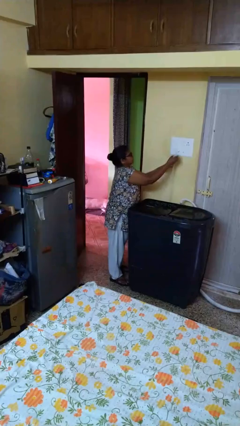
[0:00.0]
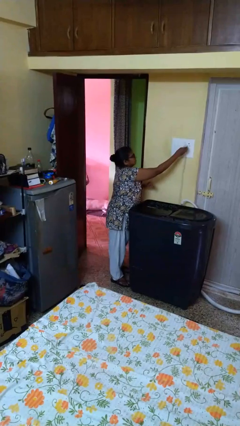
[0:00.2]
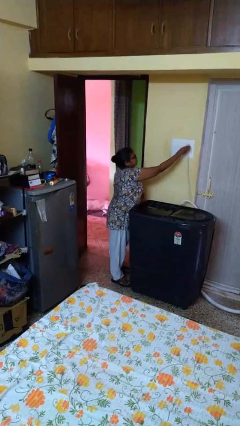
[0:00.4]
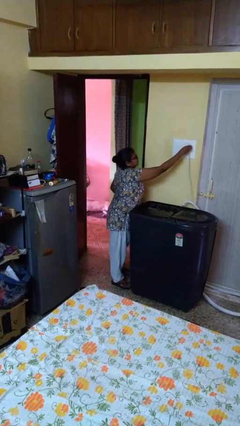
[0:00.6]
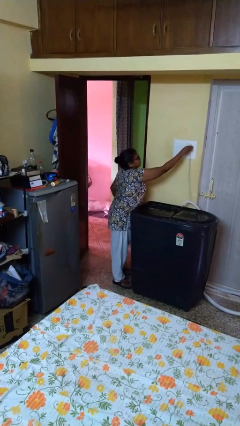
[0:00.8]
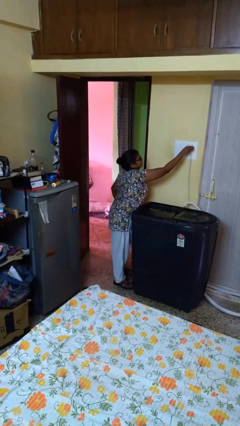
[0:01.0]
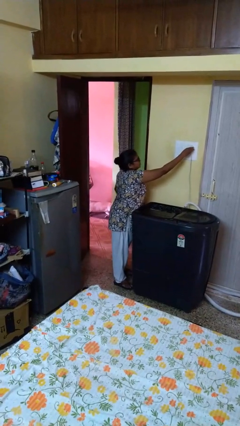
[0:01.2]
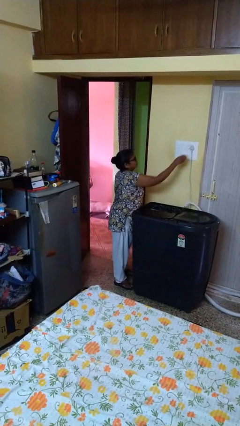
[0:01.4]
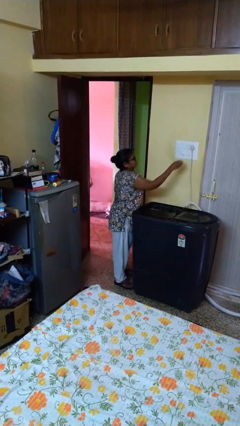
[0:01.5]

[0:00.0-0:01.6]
person plugs into electrical socket

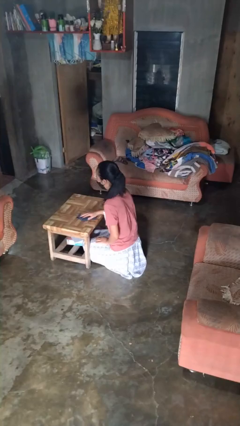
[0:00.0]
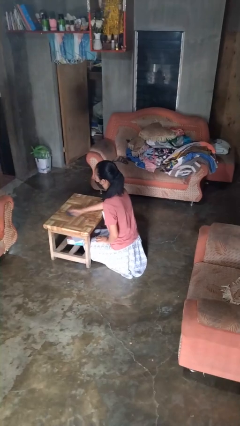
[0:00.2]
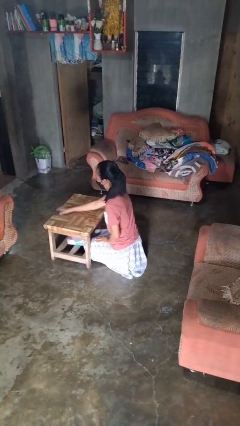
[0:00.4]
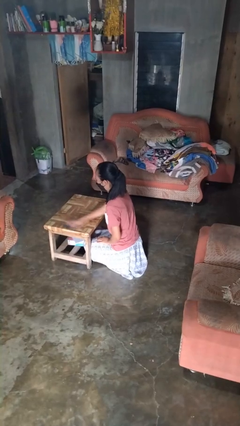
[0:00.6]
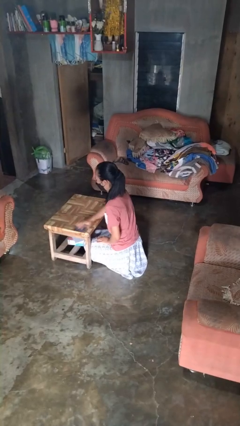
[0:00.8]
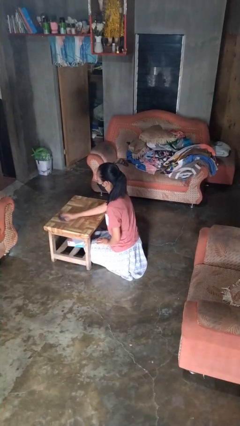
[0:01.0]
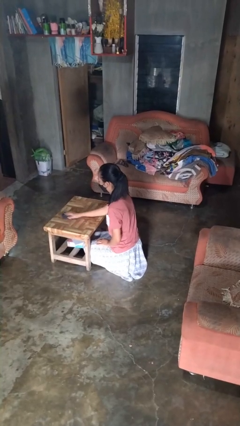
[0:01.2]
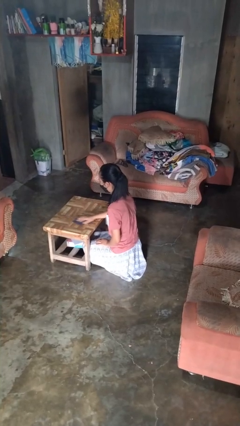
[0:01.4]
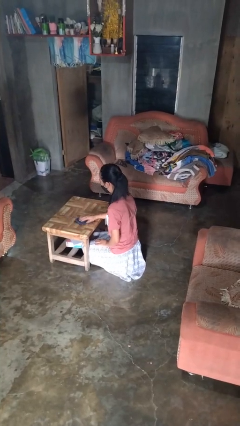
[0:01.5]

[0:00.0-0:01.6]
person cleans table with rag

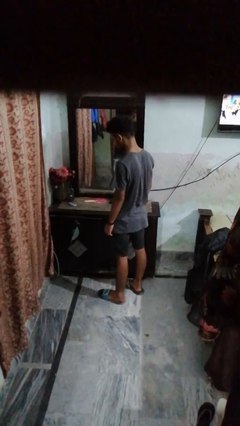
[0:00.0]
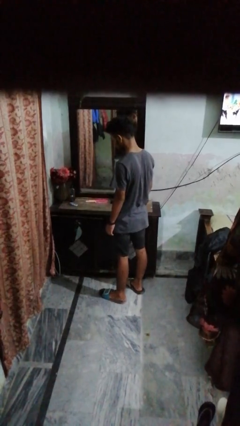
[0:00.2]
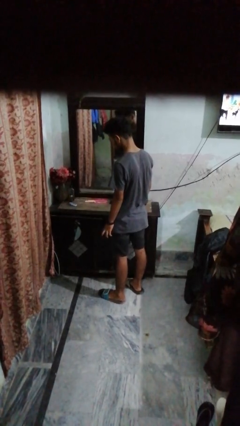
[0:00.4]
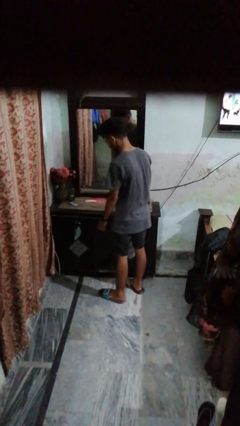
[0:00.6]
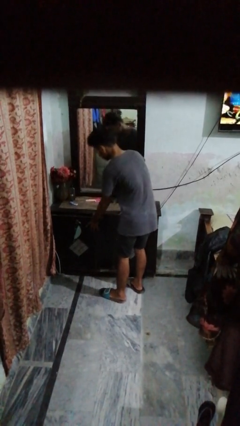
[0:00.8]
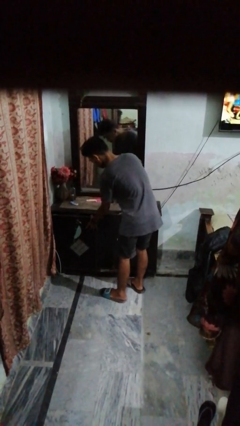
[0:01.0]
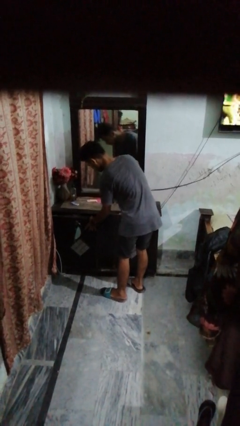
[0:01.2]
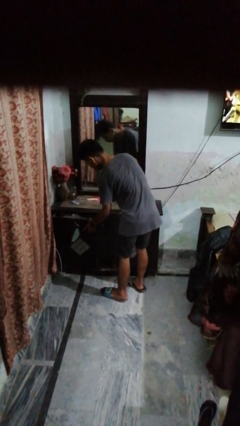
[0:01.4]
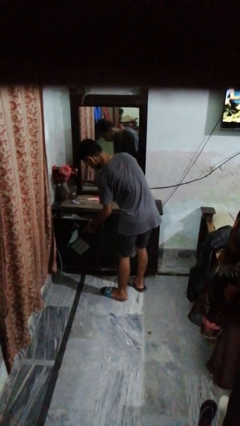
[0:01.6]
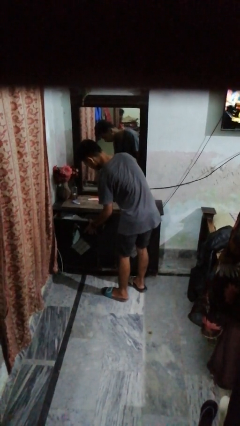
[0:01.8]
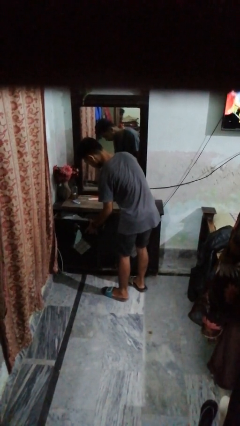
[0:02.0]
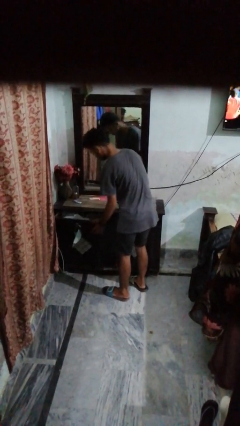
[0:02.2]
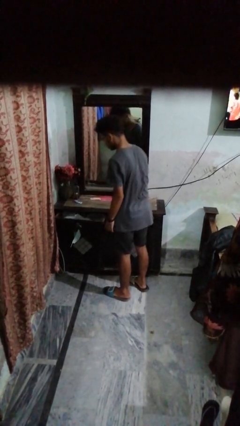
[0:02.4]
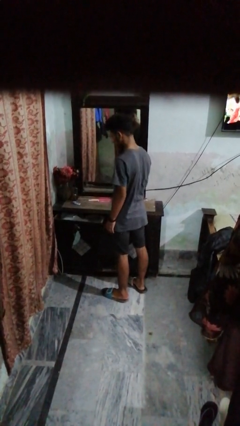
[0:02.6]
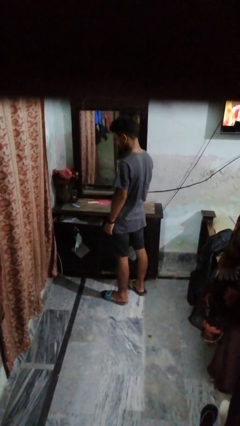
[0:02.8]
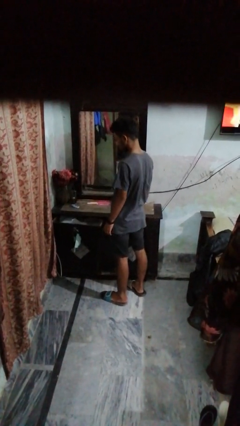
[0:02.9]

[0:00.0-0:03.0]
person opens dresser drawer

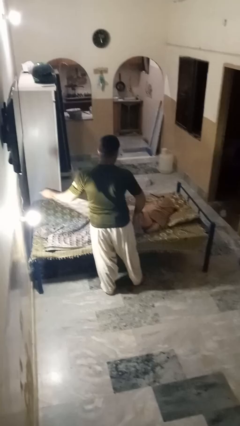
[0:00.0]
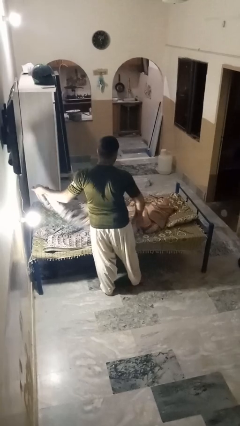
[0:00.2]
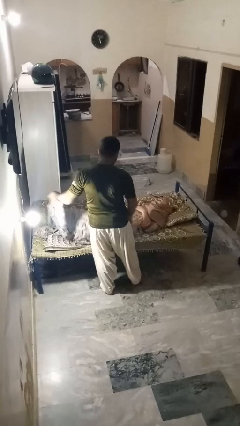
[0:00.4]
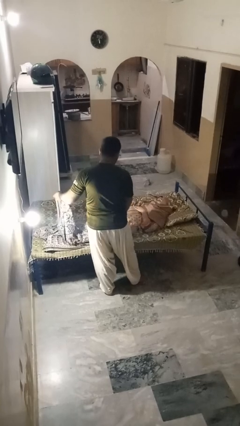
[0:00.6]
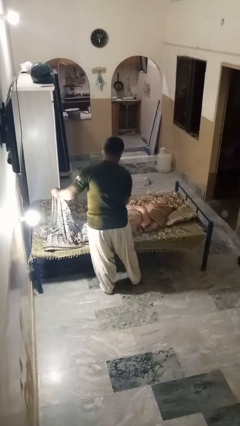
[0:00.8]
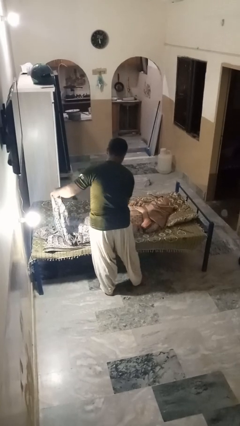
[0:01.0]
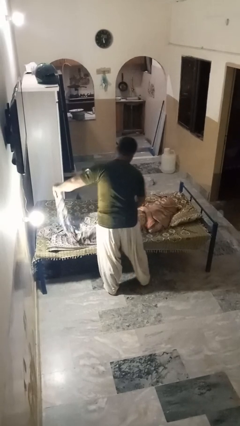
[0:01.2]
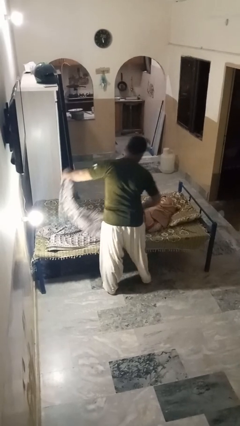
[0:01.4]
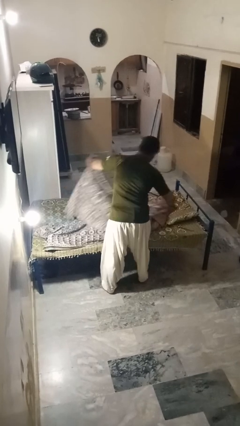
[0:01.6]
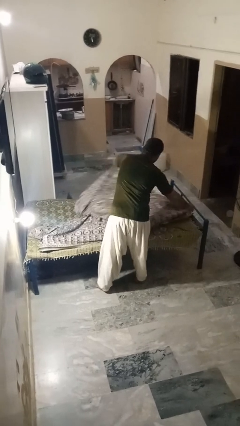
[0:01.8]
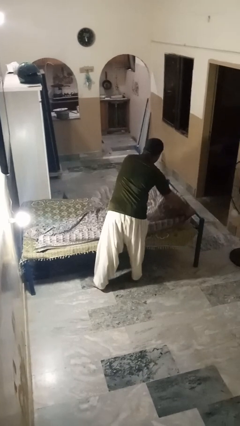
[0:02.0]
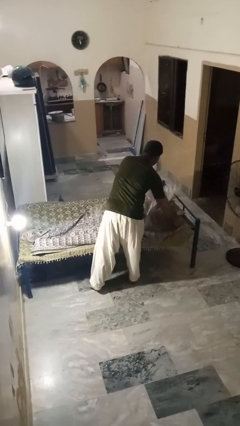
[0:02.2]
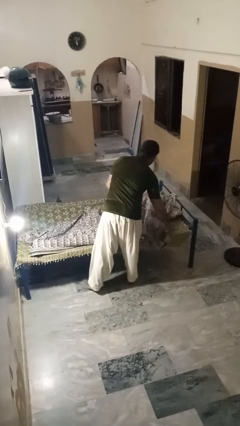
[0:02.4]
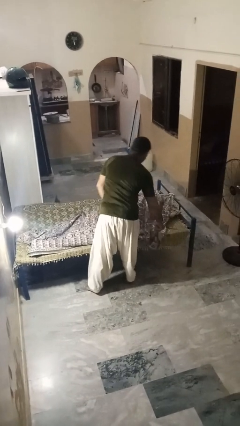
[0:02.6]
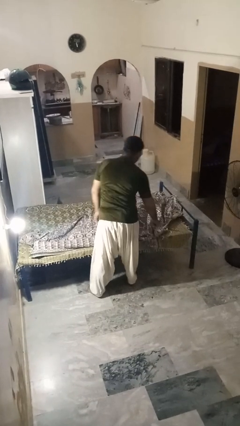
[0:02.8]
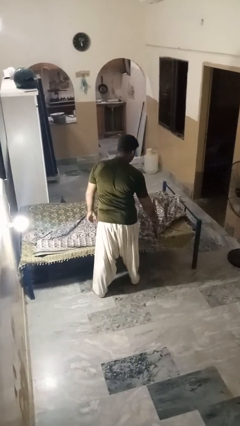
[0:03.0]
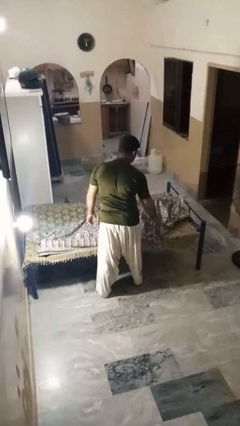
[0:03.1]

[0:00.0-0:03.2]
person covers friend with blanket

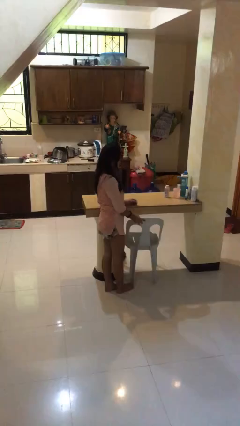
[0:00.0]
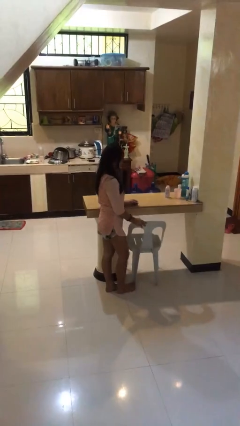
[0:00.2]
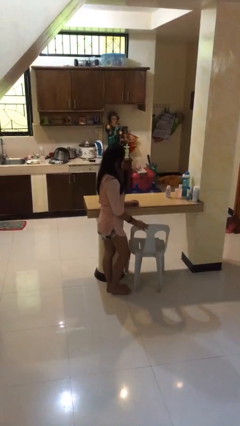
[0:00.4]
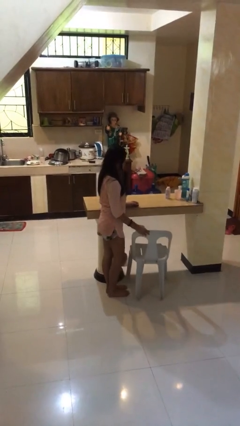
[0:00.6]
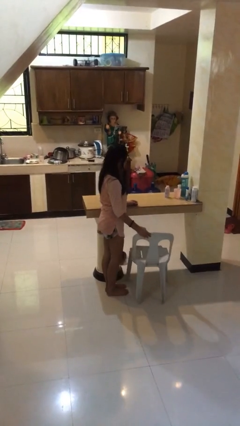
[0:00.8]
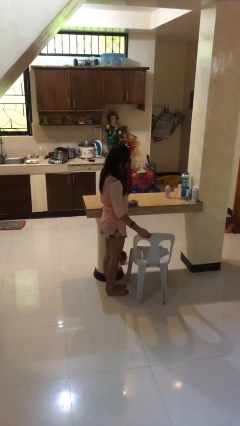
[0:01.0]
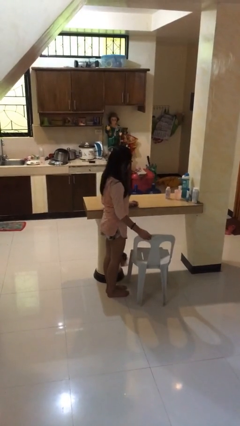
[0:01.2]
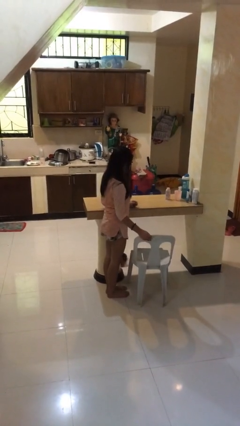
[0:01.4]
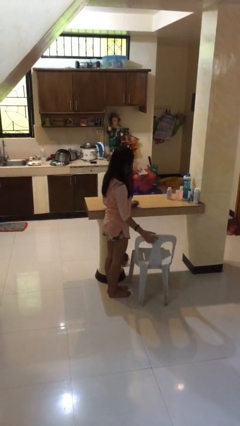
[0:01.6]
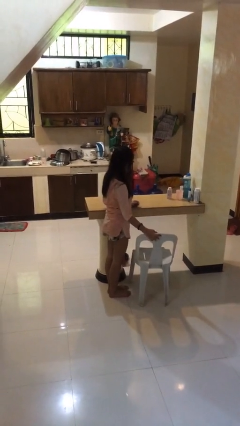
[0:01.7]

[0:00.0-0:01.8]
person pulls out chair

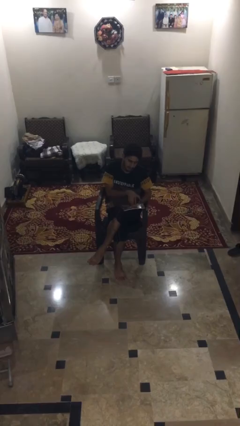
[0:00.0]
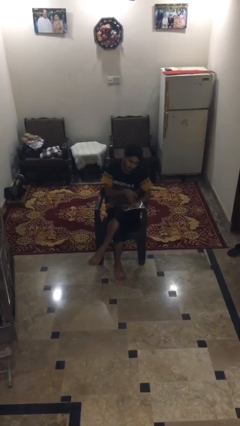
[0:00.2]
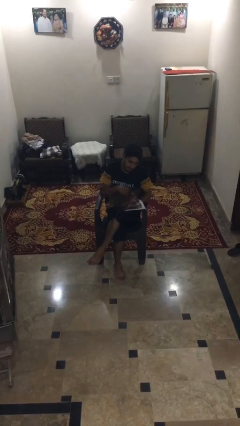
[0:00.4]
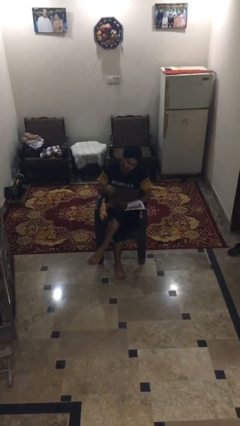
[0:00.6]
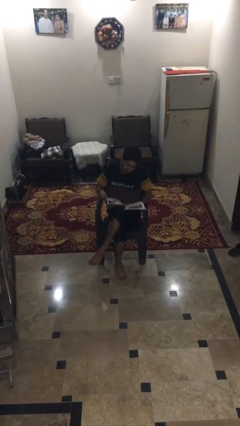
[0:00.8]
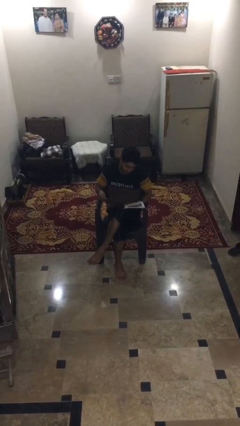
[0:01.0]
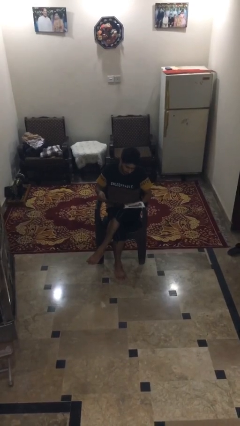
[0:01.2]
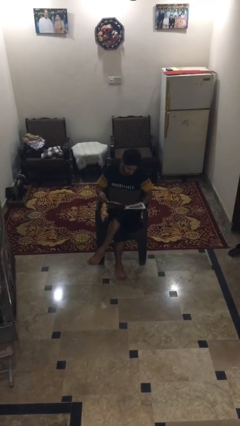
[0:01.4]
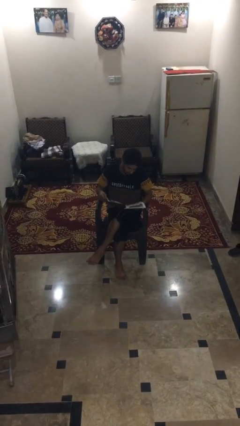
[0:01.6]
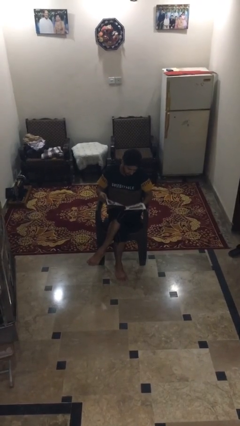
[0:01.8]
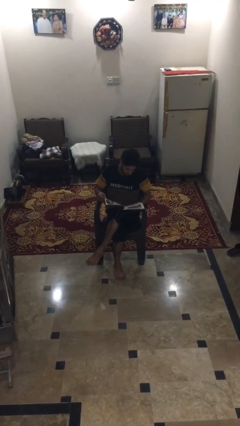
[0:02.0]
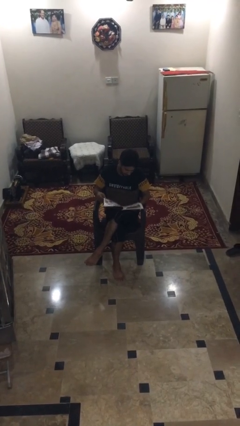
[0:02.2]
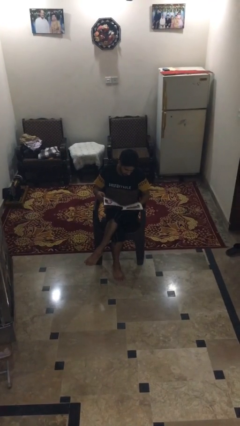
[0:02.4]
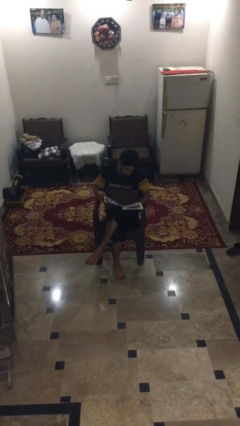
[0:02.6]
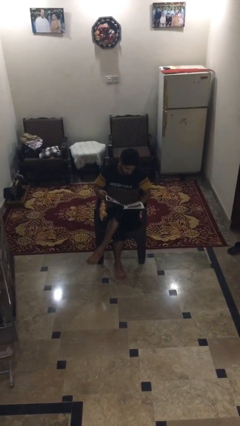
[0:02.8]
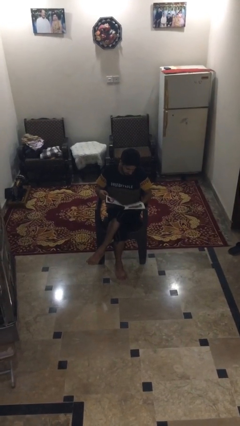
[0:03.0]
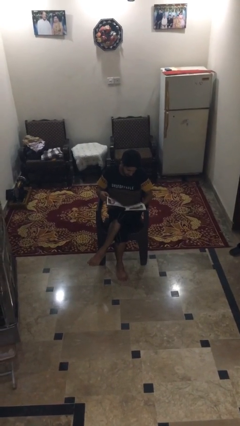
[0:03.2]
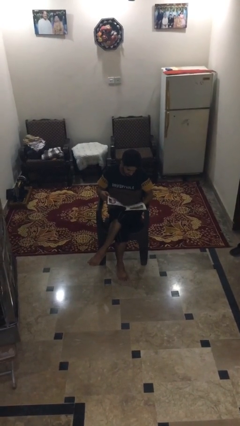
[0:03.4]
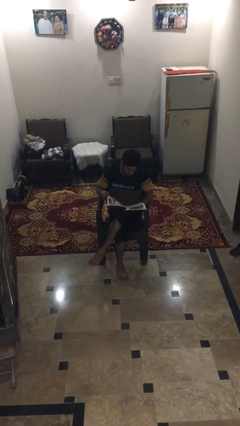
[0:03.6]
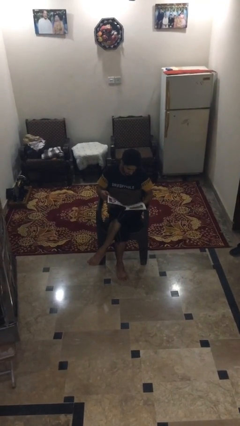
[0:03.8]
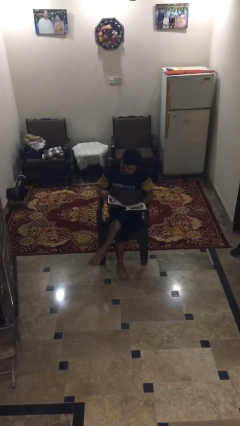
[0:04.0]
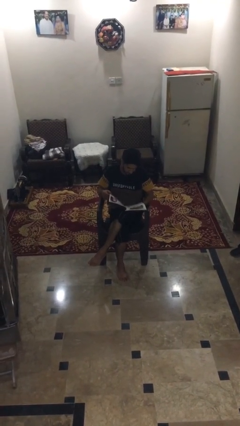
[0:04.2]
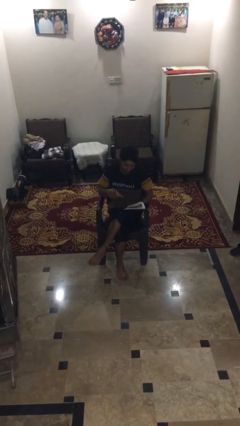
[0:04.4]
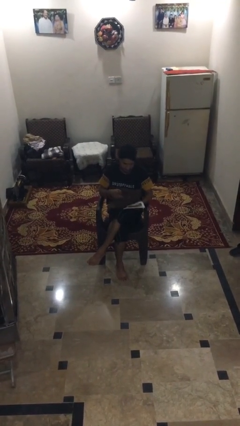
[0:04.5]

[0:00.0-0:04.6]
person reads magazine

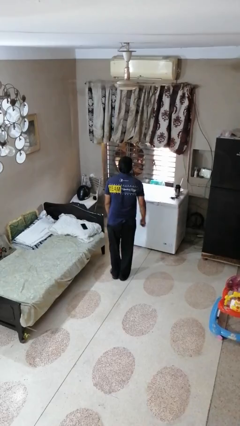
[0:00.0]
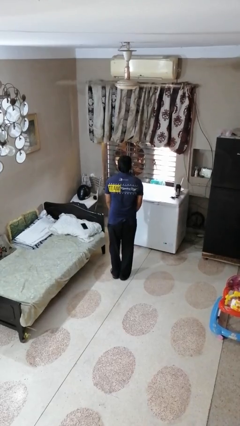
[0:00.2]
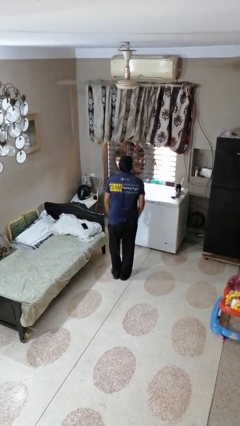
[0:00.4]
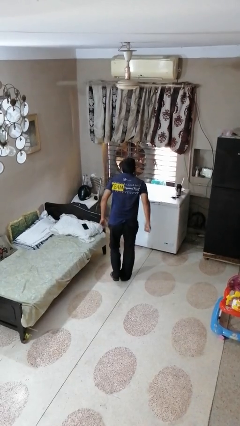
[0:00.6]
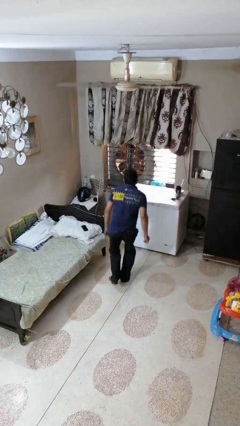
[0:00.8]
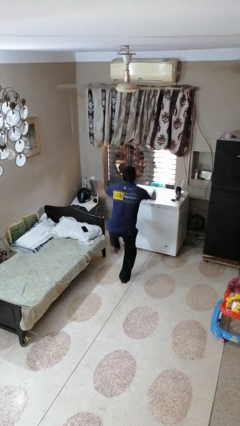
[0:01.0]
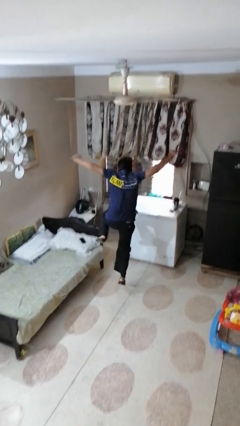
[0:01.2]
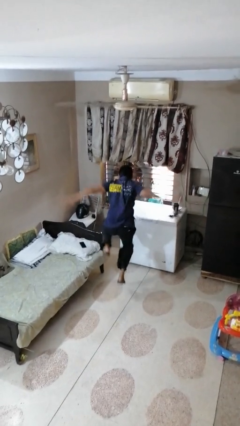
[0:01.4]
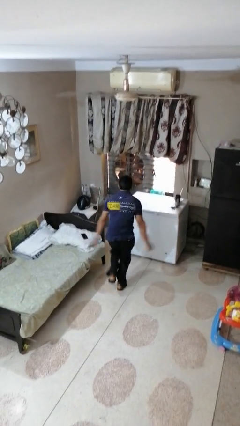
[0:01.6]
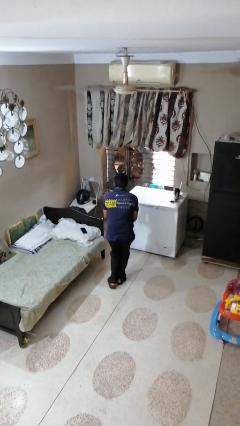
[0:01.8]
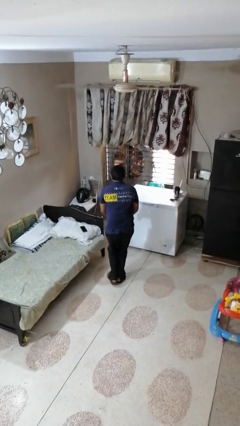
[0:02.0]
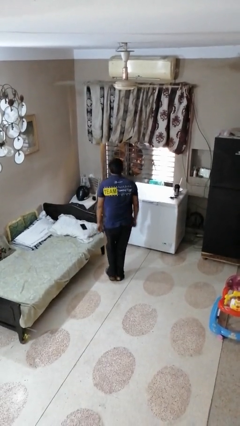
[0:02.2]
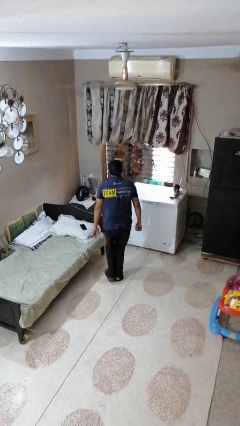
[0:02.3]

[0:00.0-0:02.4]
person jumps
